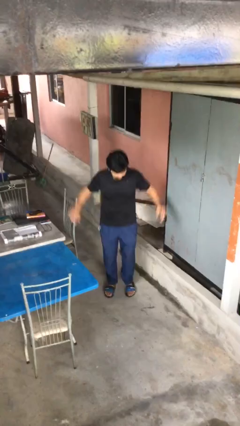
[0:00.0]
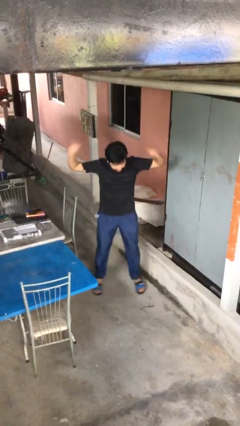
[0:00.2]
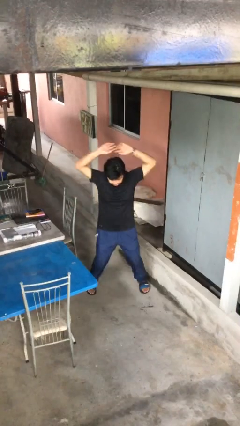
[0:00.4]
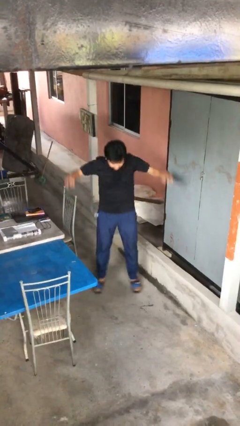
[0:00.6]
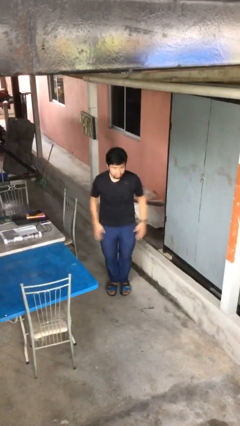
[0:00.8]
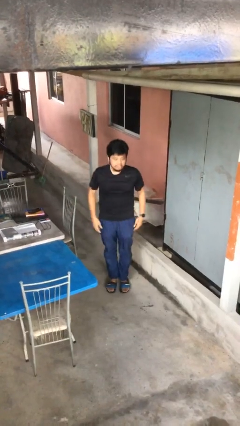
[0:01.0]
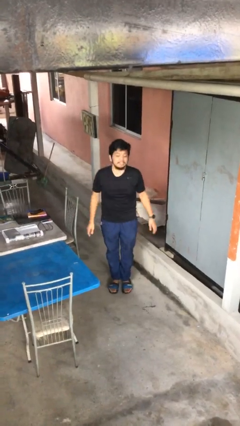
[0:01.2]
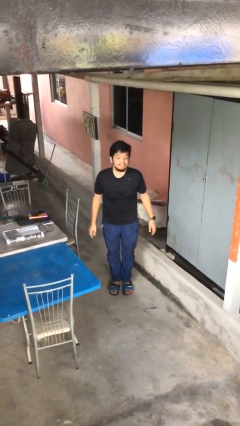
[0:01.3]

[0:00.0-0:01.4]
person exercises with jumping jacks

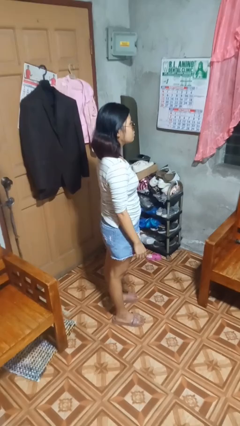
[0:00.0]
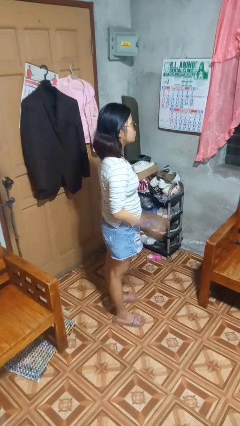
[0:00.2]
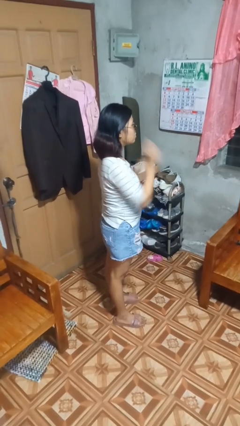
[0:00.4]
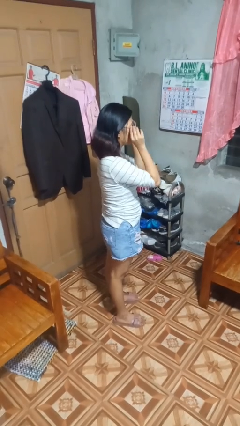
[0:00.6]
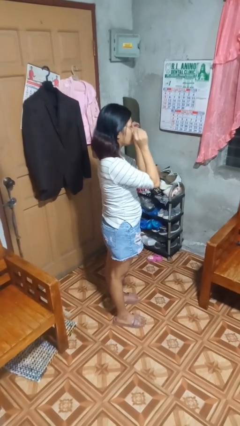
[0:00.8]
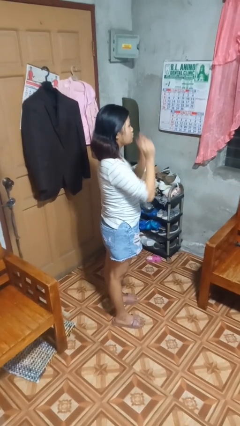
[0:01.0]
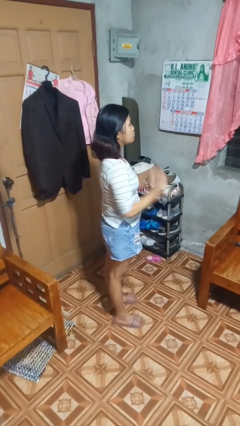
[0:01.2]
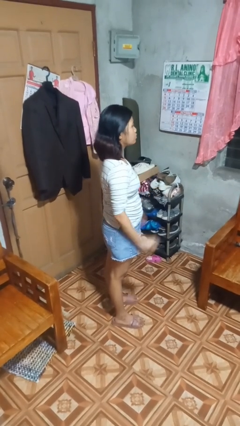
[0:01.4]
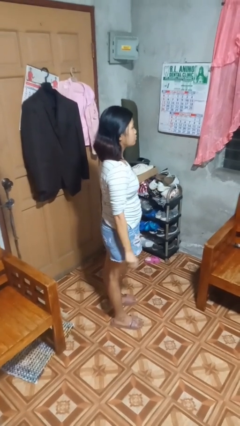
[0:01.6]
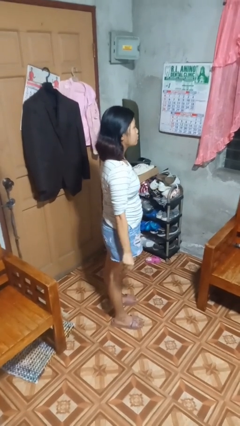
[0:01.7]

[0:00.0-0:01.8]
person takes off sunglasses

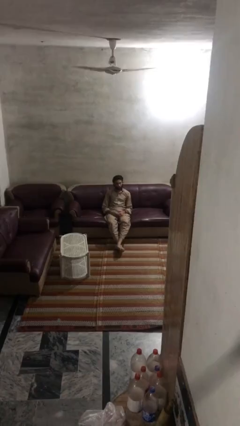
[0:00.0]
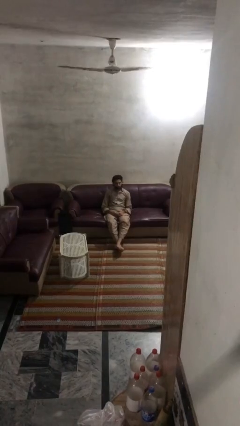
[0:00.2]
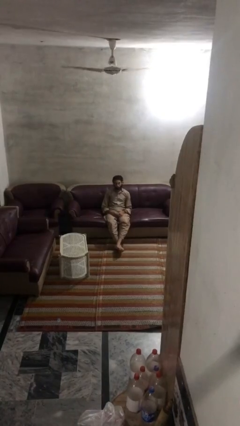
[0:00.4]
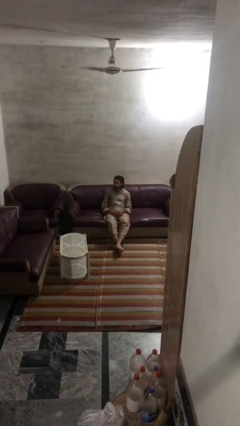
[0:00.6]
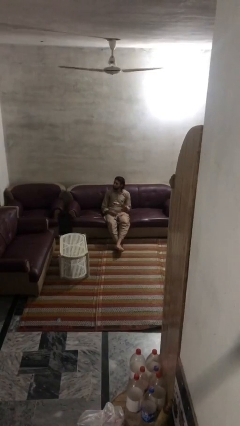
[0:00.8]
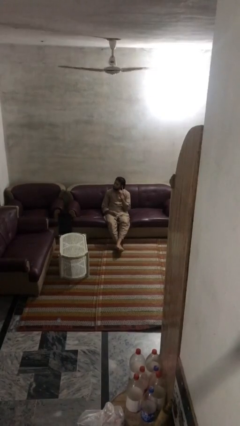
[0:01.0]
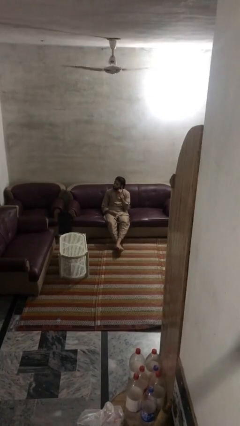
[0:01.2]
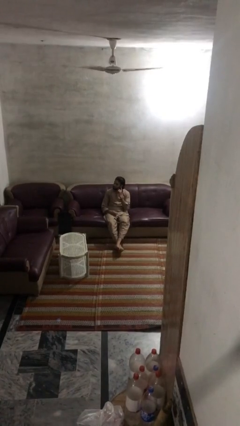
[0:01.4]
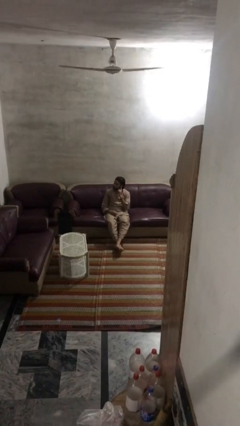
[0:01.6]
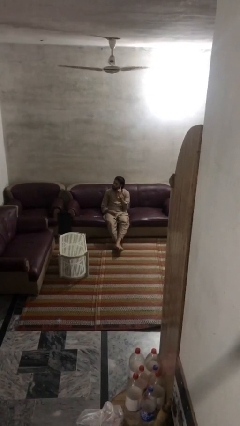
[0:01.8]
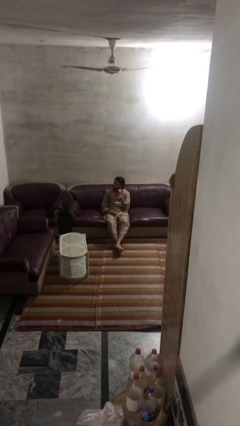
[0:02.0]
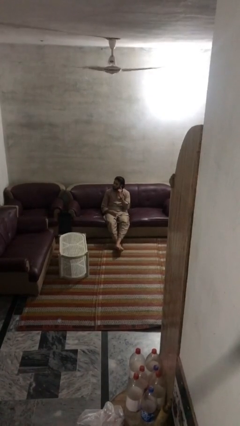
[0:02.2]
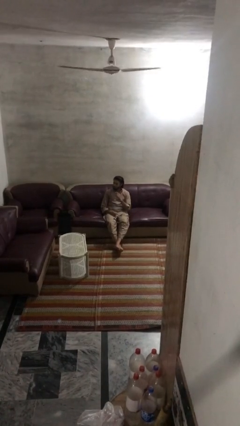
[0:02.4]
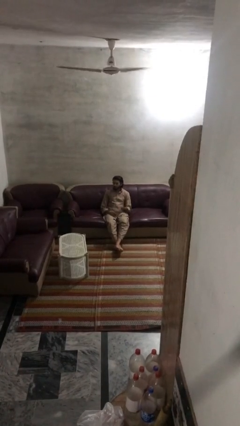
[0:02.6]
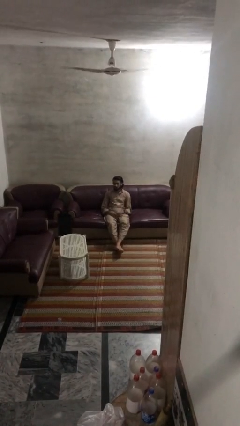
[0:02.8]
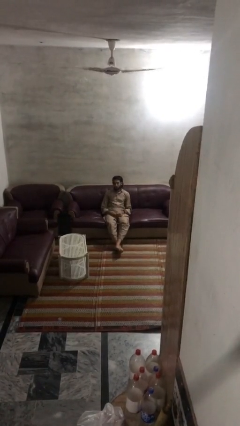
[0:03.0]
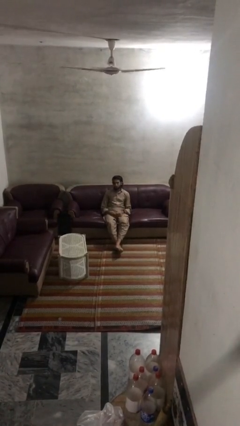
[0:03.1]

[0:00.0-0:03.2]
person gestures listen closely

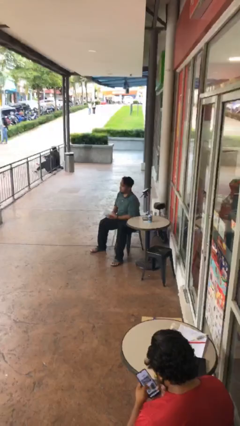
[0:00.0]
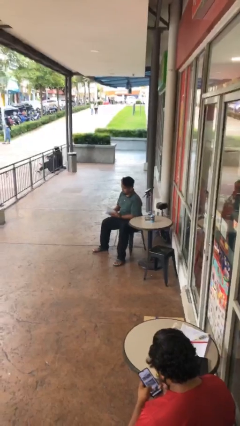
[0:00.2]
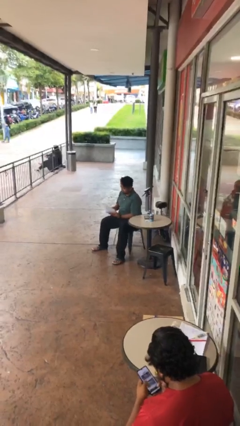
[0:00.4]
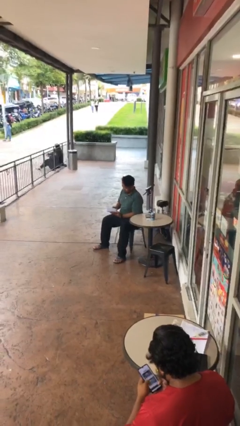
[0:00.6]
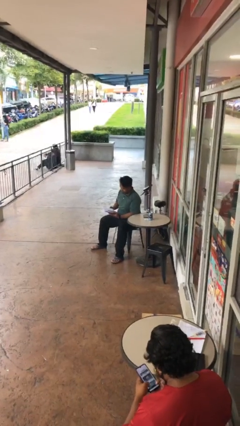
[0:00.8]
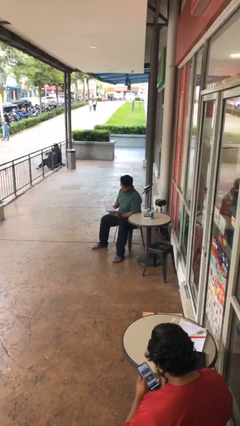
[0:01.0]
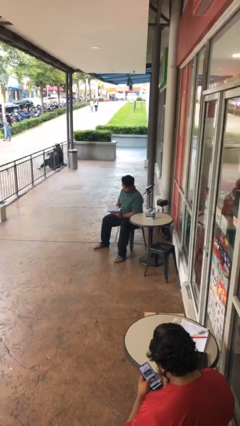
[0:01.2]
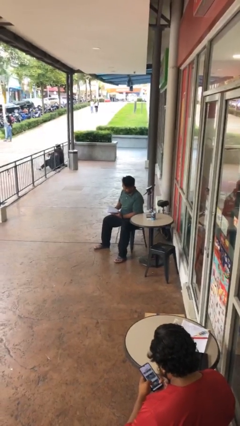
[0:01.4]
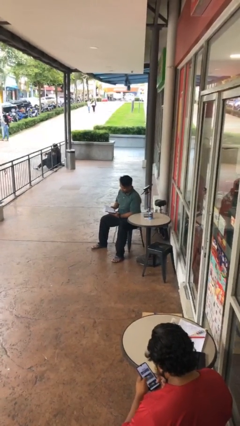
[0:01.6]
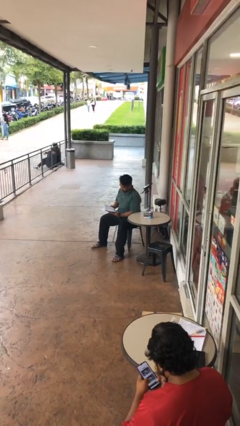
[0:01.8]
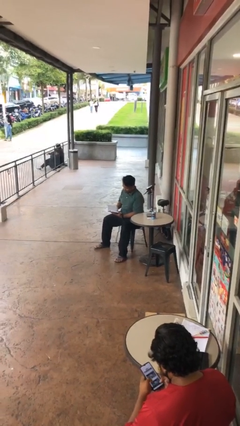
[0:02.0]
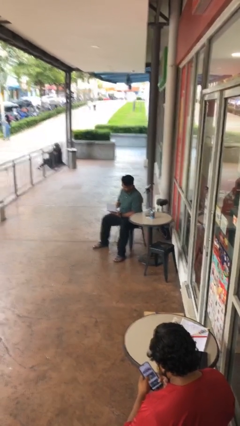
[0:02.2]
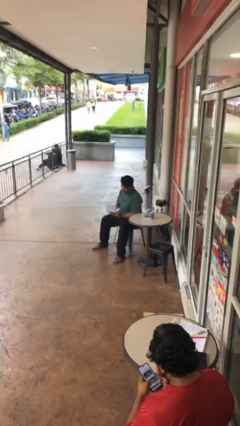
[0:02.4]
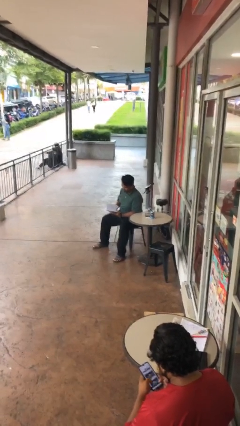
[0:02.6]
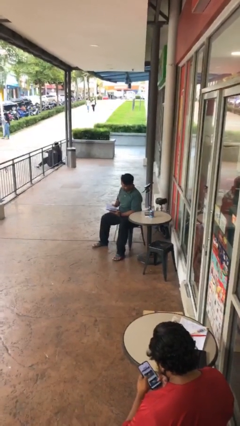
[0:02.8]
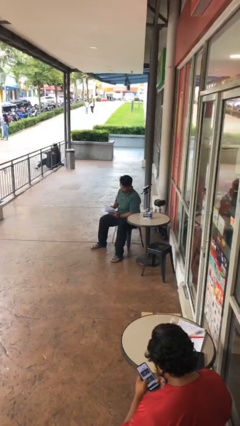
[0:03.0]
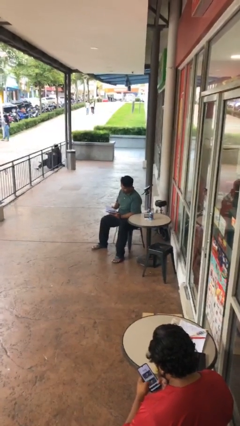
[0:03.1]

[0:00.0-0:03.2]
person reads document

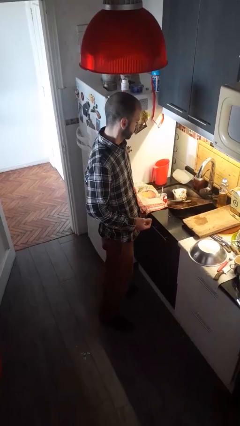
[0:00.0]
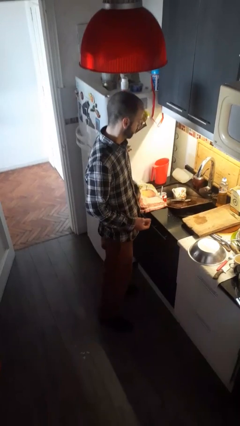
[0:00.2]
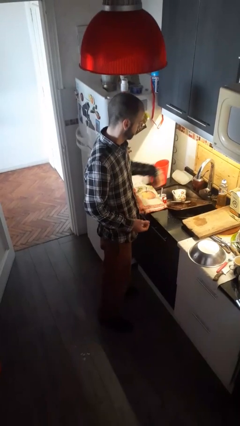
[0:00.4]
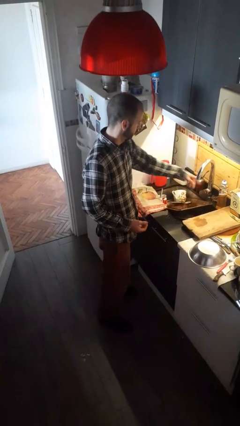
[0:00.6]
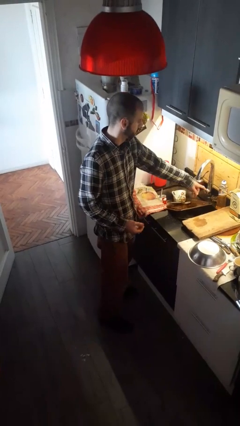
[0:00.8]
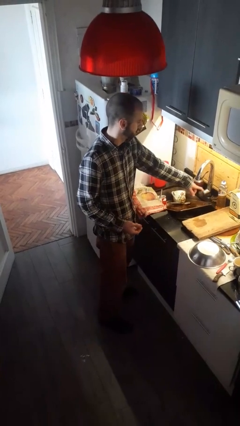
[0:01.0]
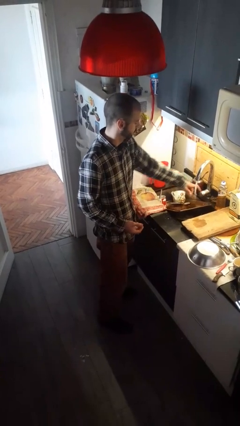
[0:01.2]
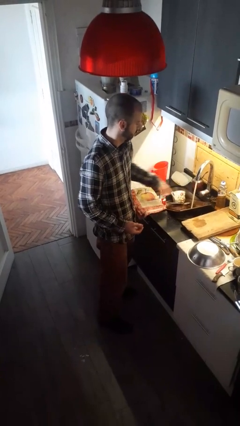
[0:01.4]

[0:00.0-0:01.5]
person turns on faucet

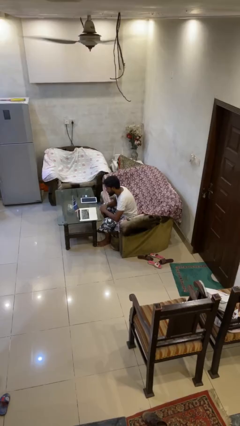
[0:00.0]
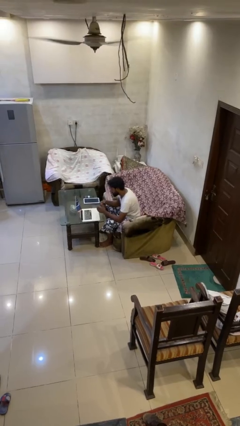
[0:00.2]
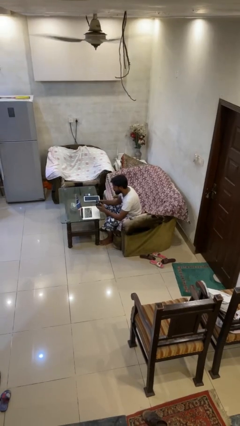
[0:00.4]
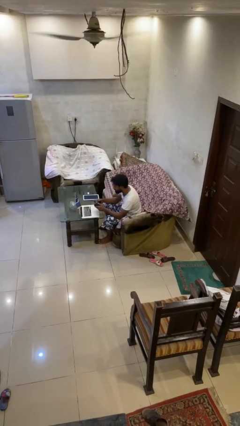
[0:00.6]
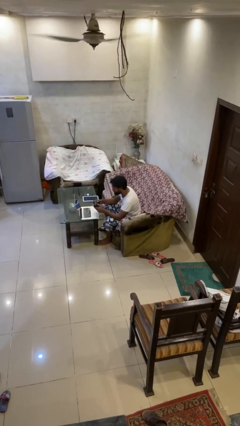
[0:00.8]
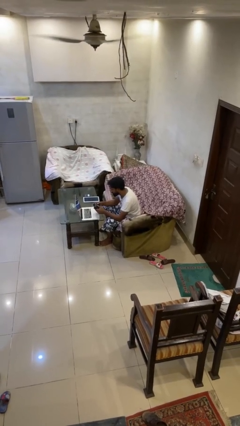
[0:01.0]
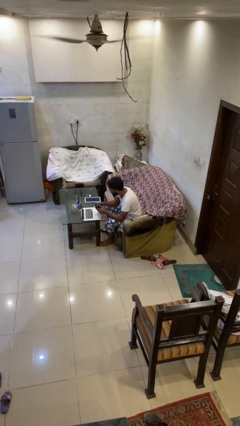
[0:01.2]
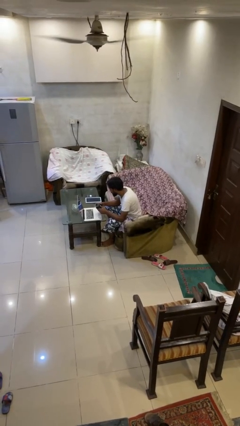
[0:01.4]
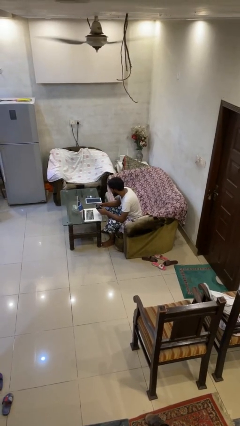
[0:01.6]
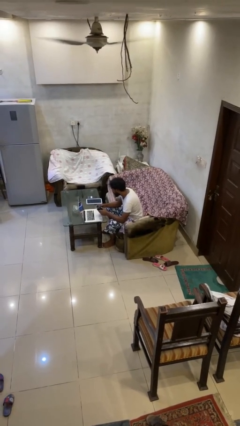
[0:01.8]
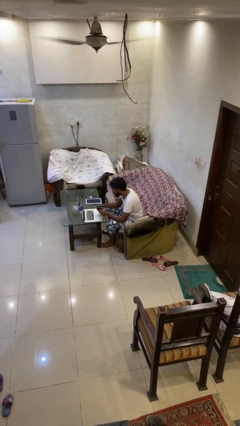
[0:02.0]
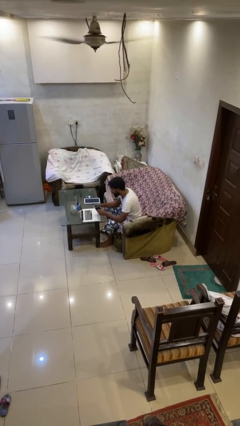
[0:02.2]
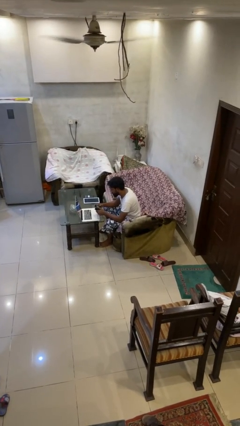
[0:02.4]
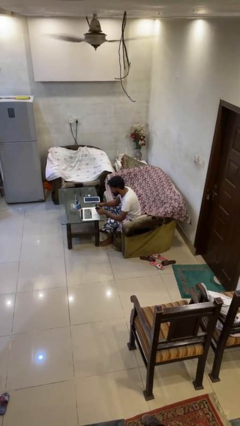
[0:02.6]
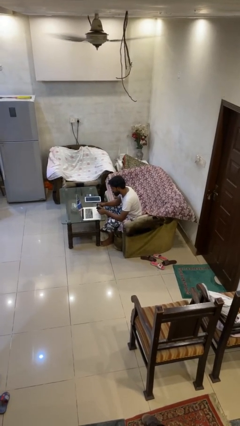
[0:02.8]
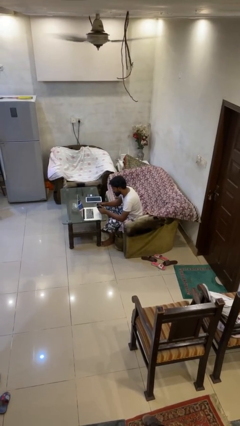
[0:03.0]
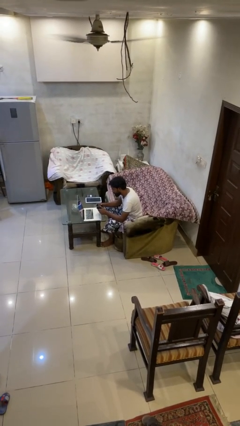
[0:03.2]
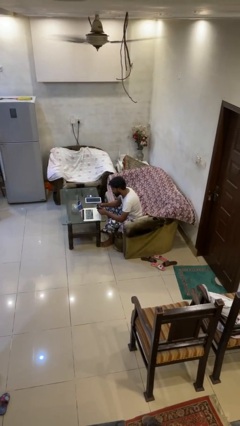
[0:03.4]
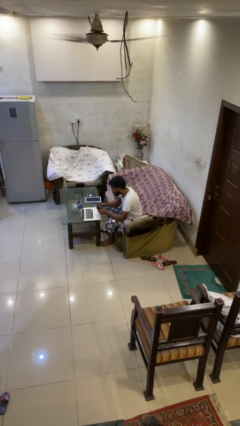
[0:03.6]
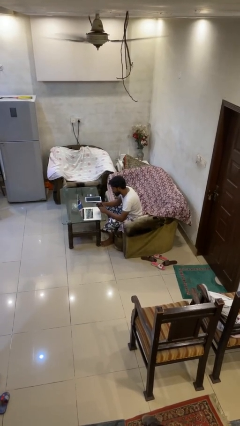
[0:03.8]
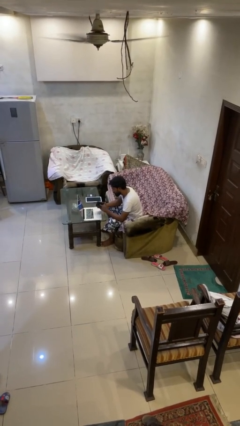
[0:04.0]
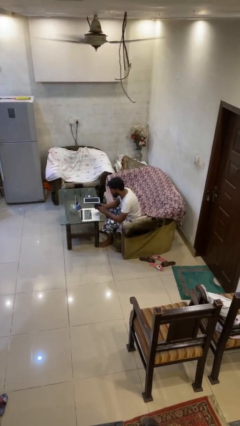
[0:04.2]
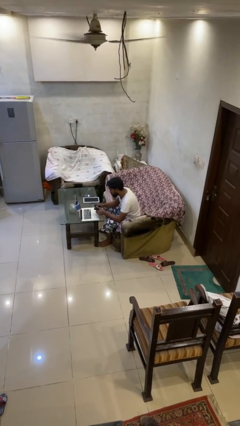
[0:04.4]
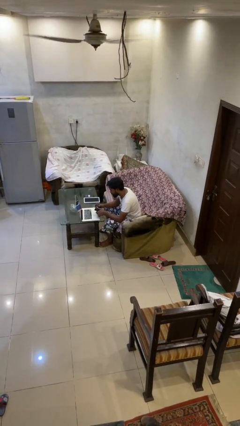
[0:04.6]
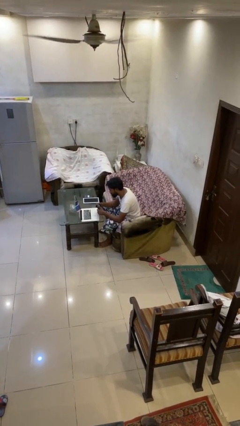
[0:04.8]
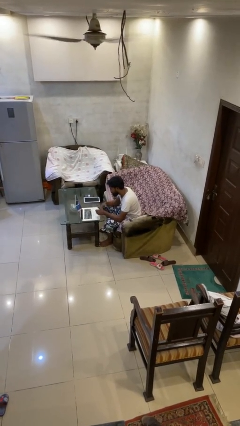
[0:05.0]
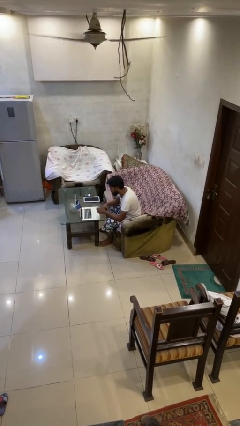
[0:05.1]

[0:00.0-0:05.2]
person interacts with handheld game

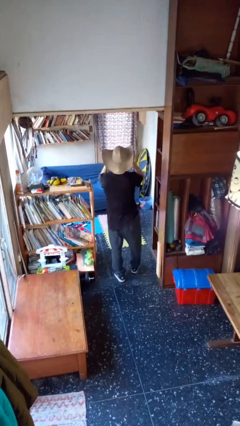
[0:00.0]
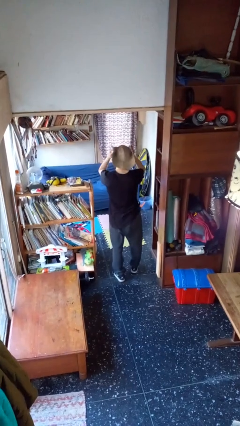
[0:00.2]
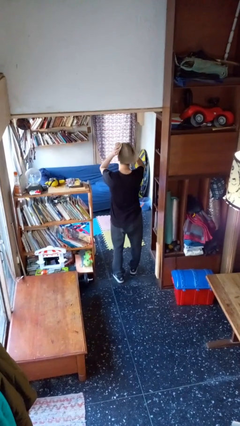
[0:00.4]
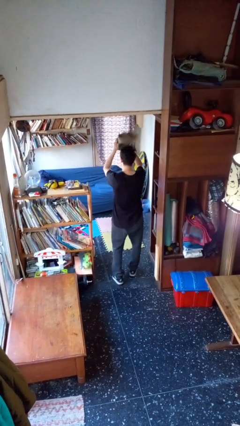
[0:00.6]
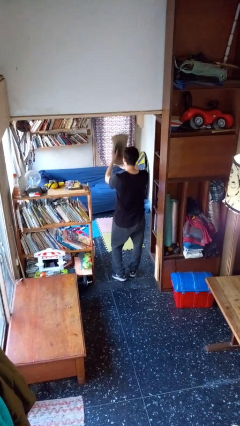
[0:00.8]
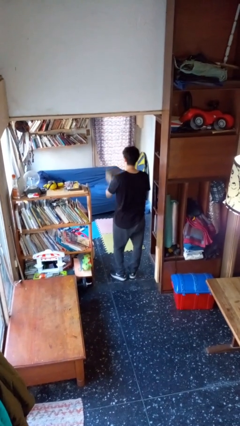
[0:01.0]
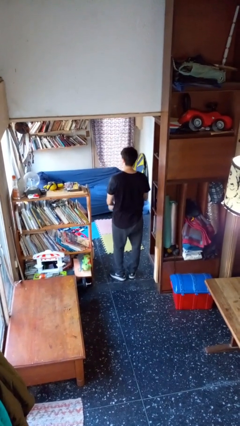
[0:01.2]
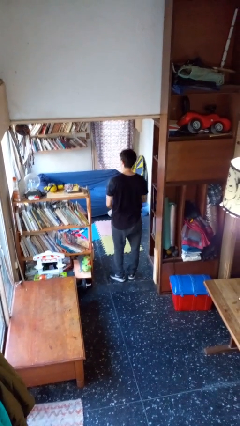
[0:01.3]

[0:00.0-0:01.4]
person takes off hat
